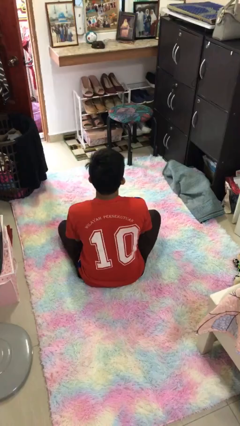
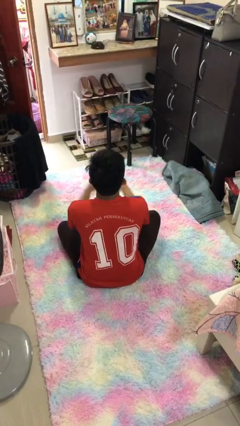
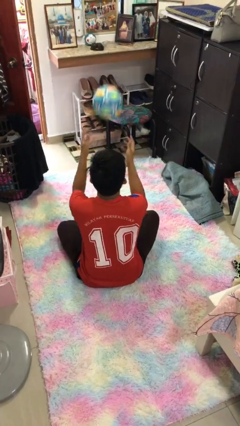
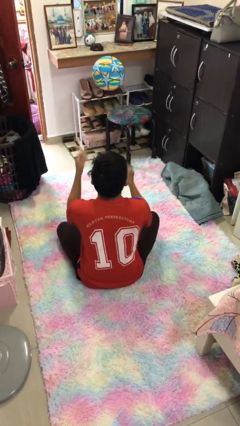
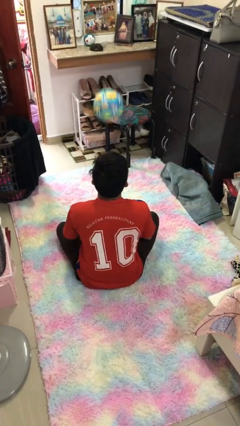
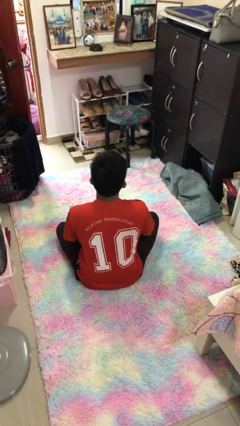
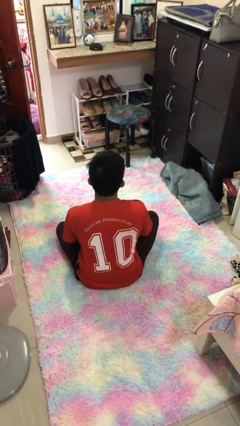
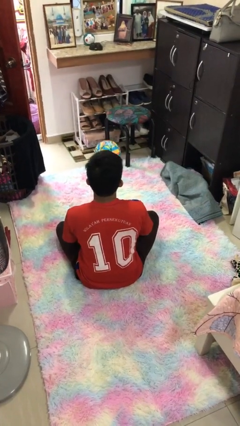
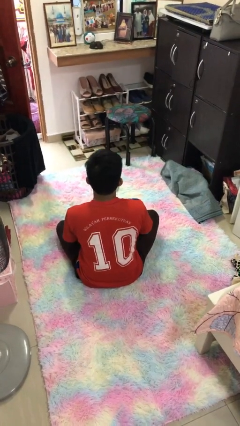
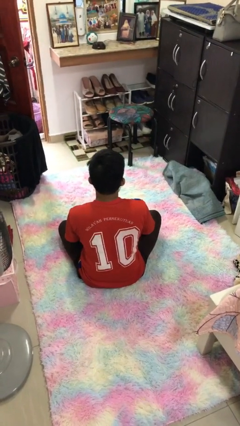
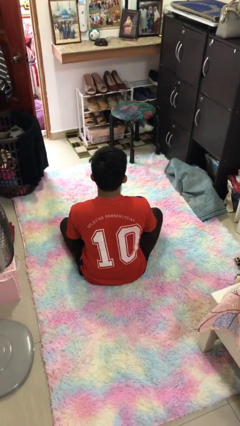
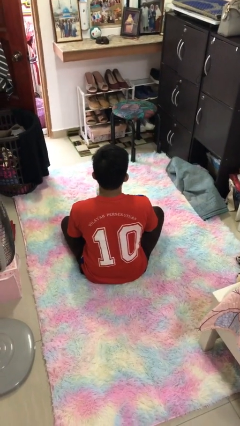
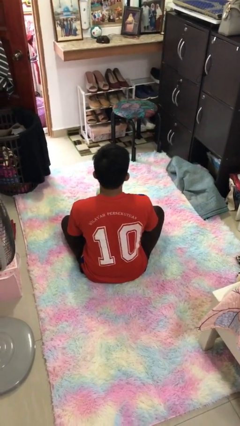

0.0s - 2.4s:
person bounces ball on floor

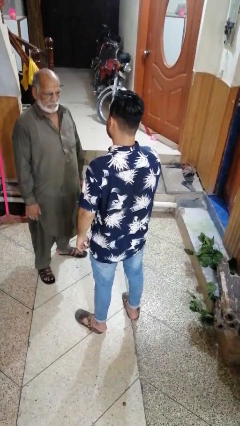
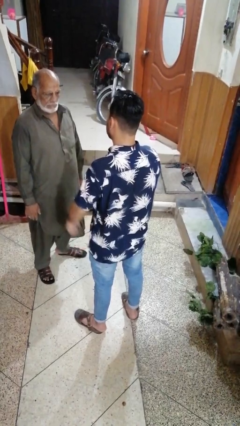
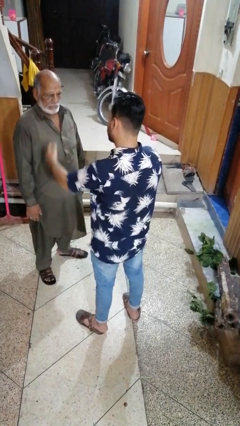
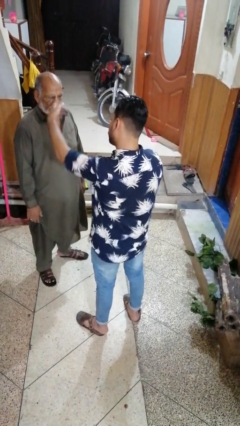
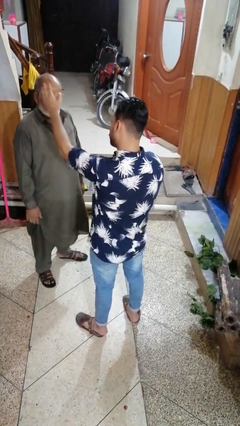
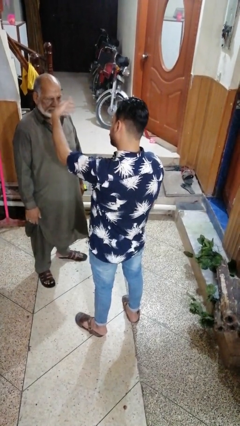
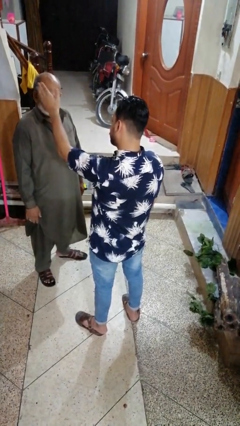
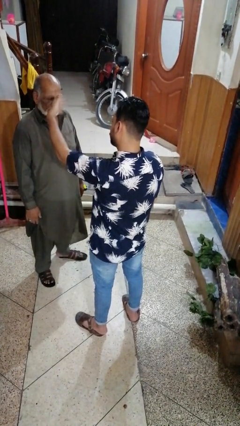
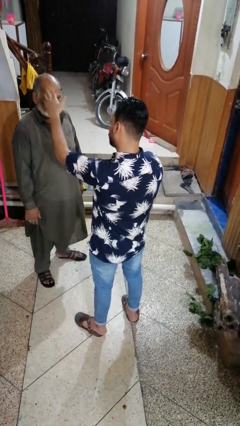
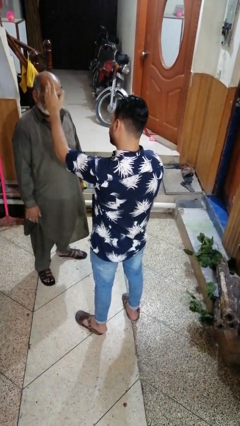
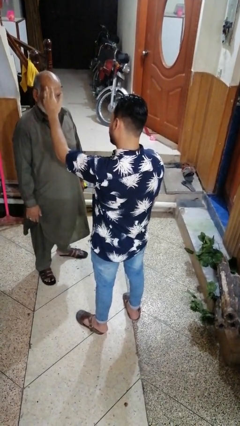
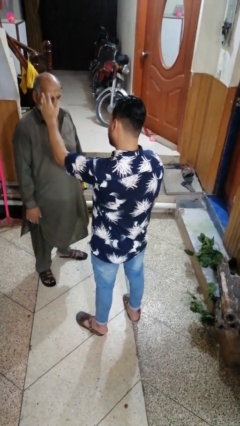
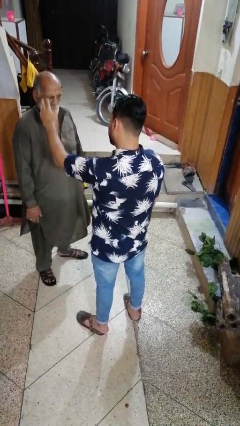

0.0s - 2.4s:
person shoves person

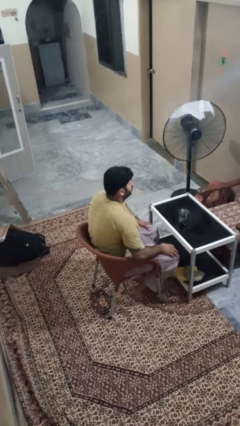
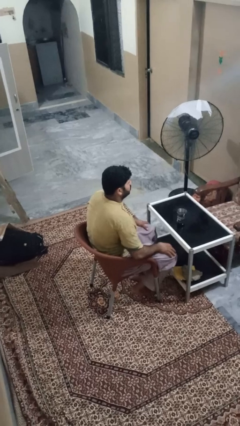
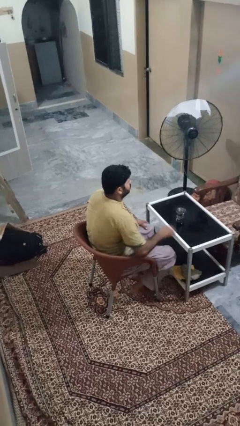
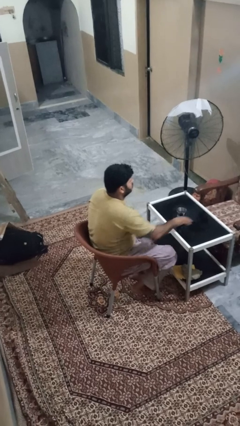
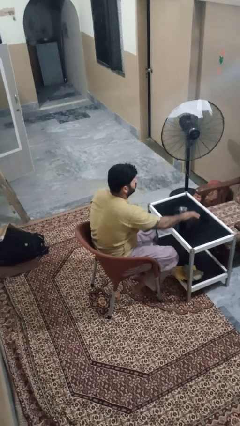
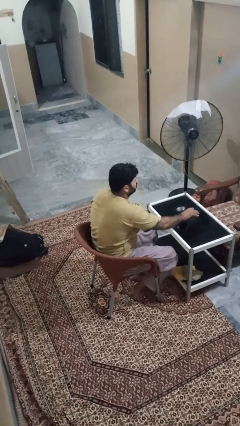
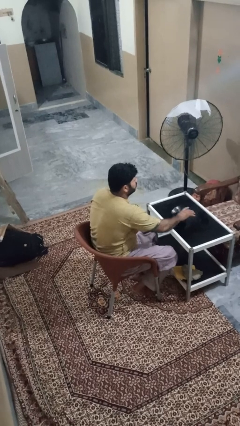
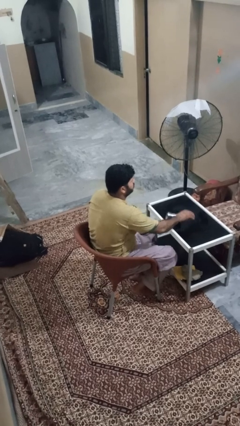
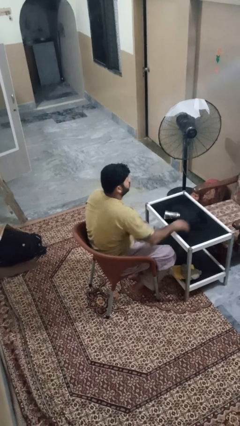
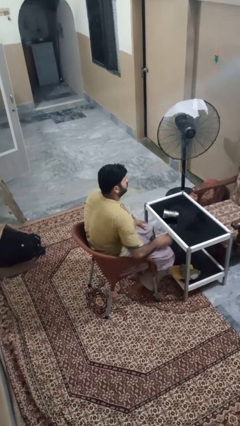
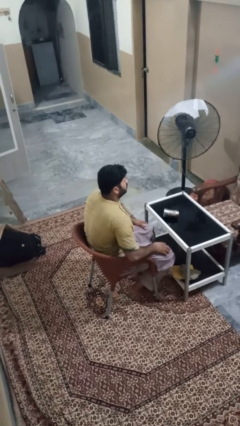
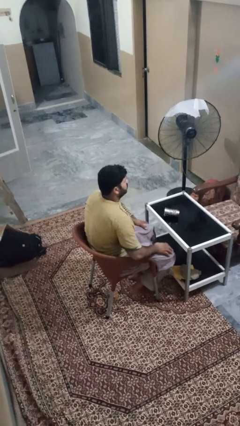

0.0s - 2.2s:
person knocks over glass

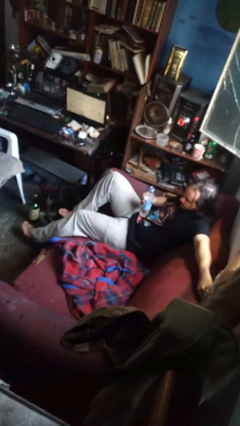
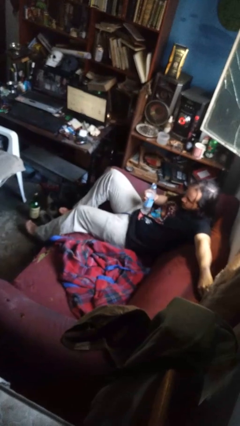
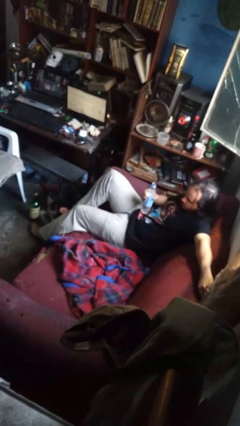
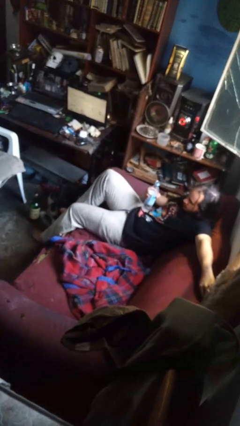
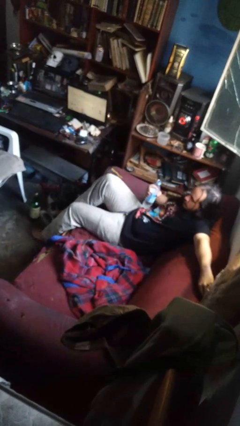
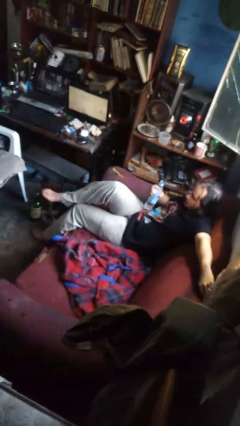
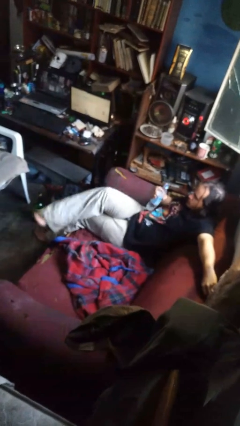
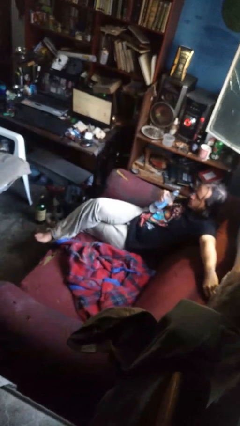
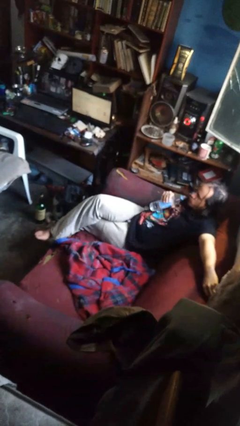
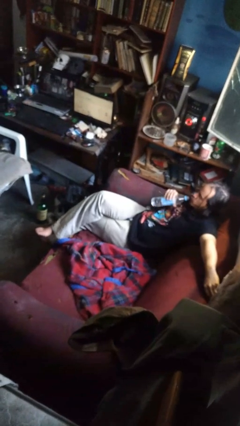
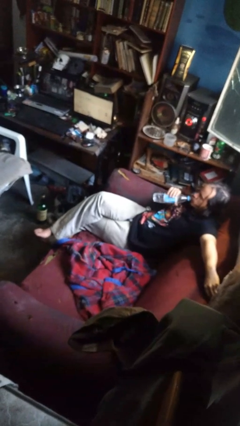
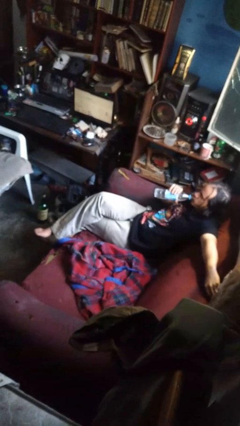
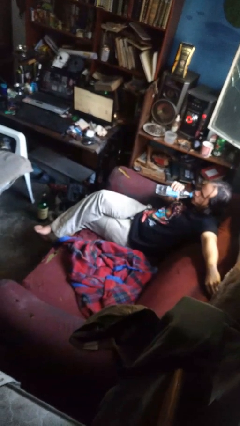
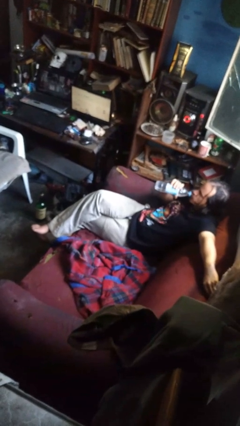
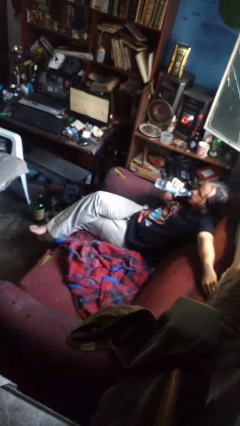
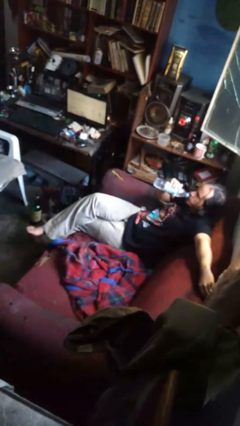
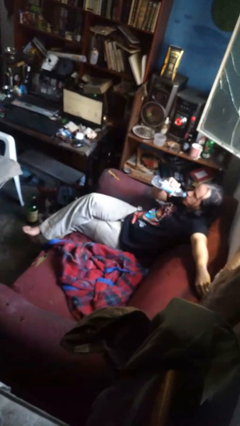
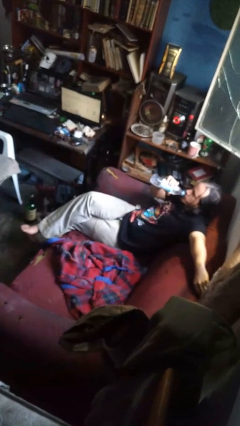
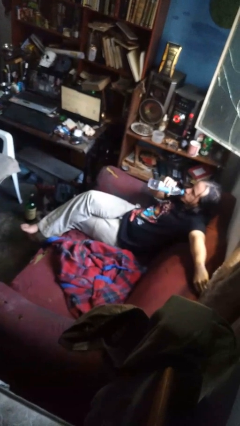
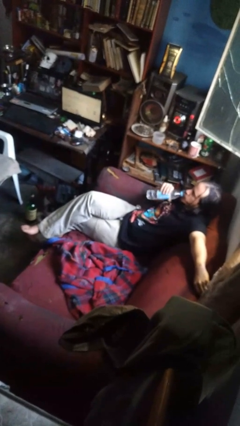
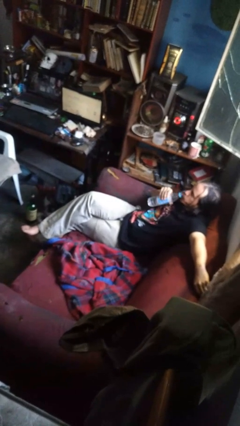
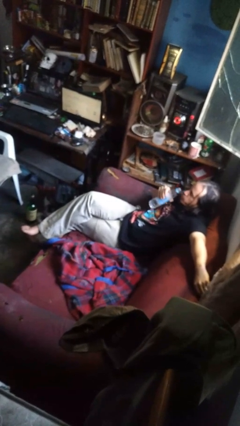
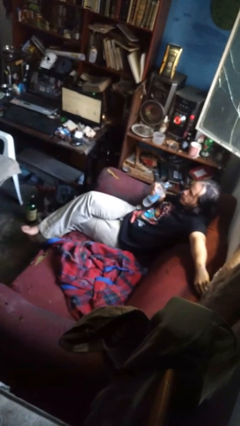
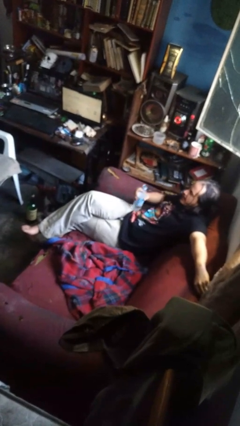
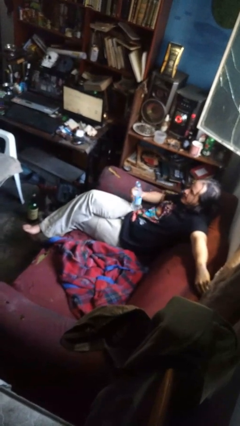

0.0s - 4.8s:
person drinks from bottle

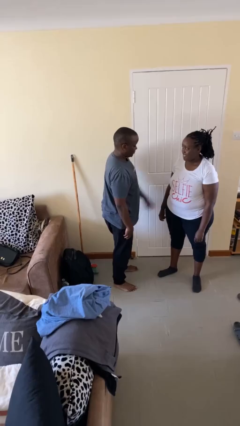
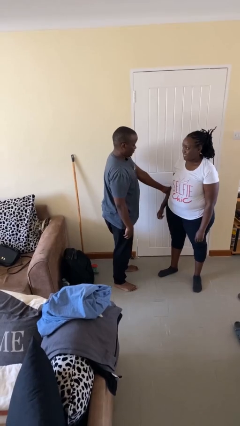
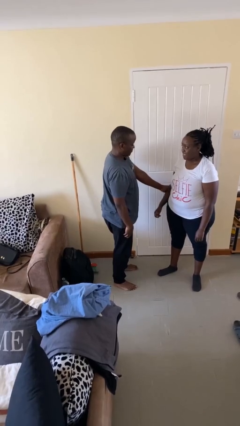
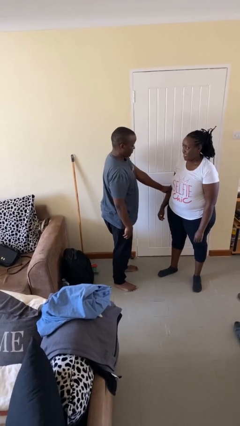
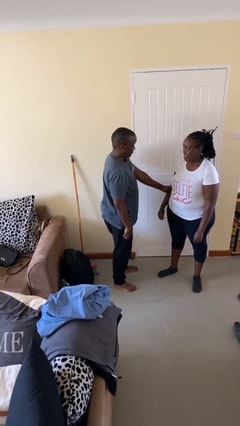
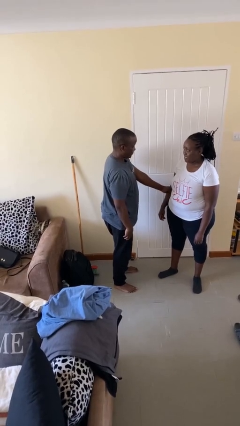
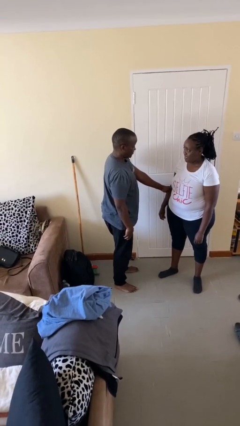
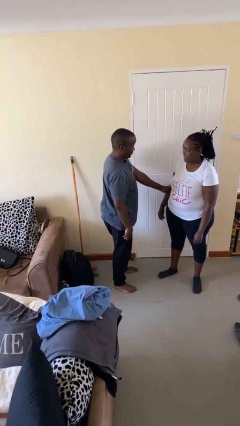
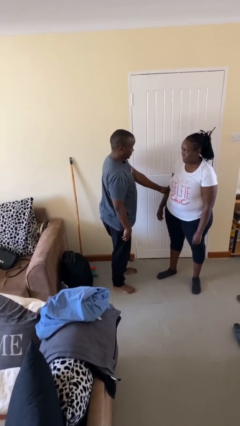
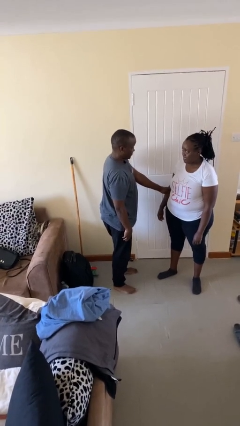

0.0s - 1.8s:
person grabs person by forearm

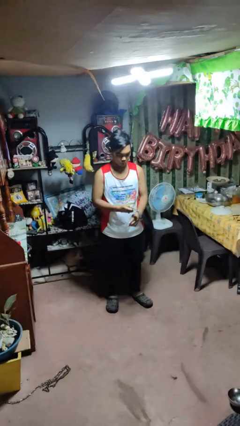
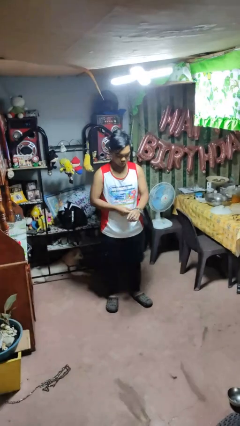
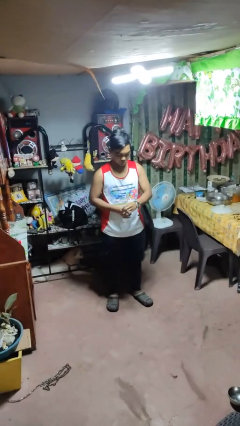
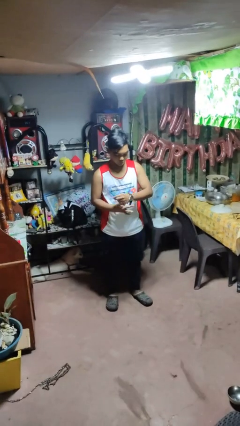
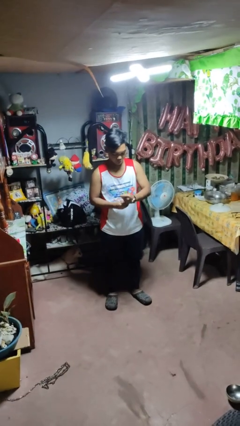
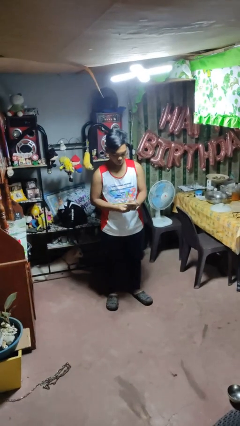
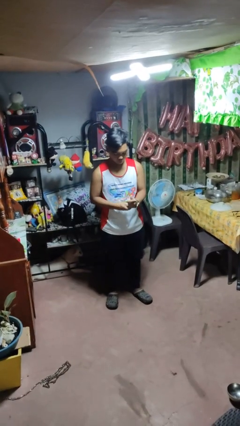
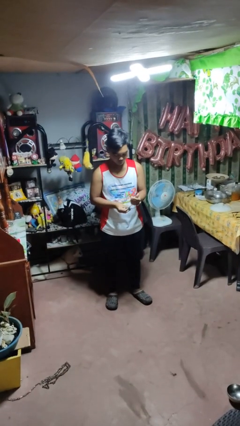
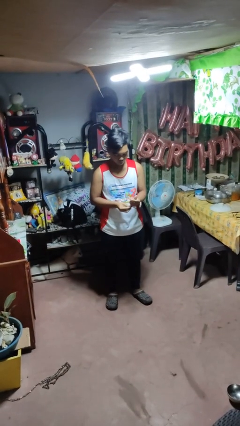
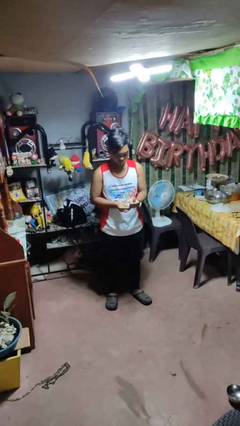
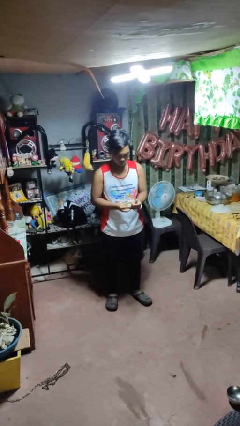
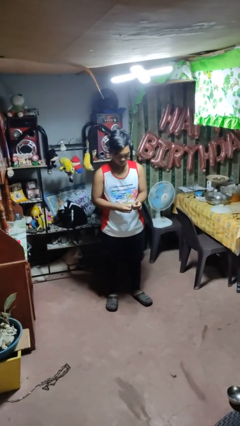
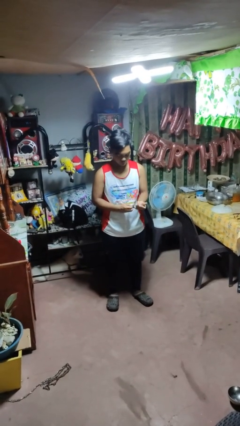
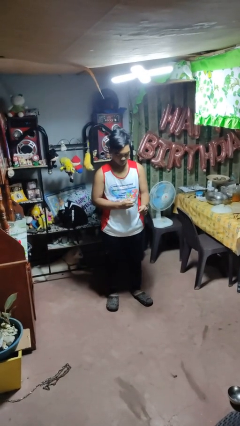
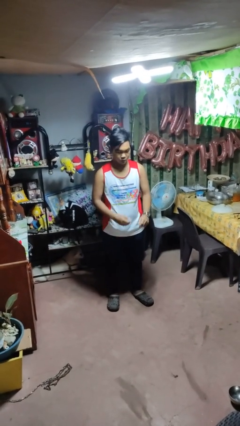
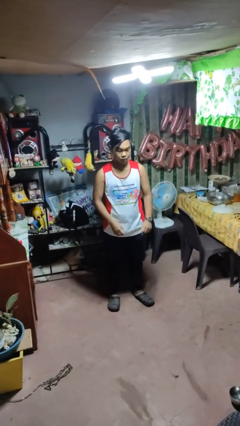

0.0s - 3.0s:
person puts on wristwatch

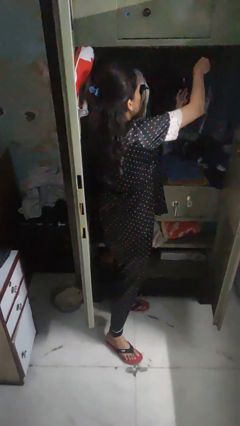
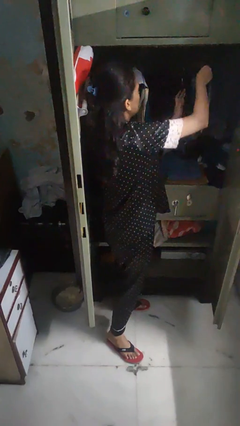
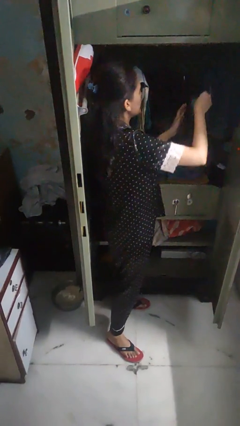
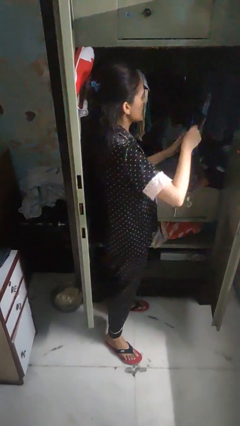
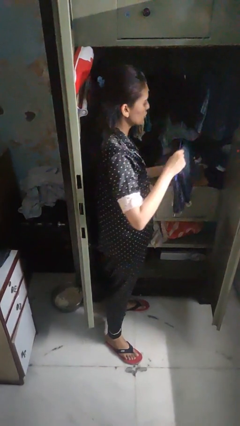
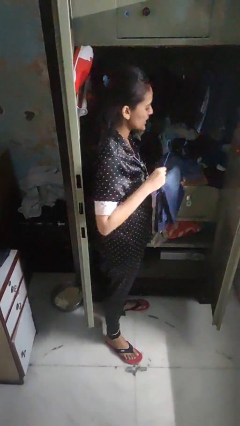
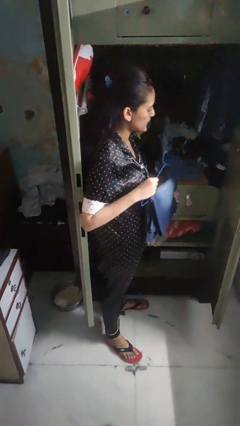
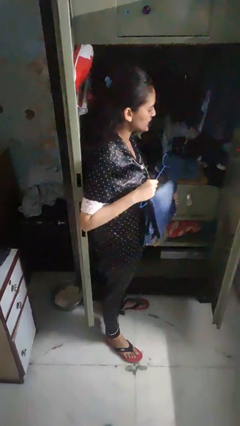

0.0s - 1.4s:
person takes clothes from closet
